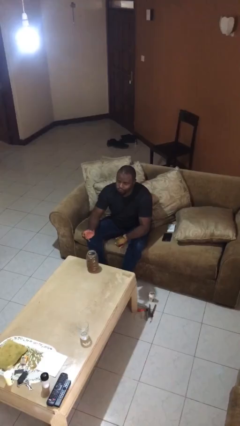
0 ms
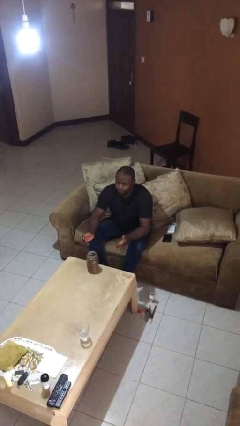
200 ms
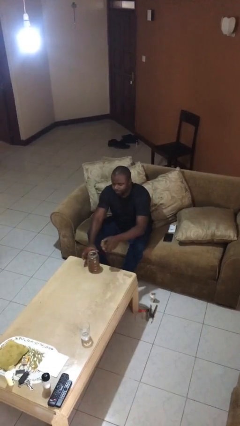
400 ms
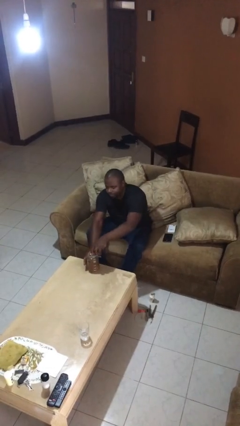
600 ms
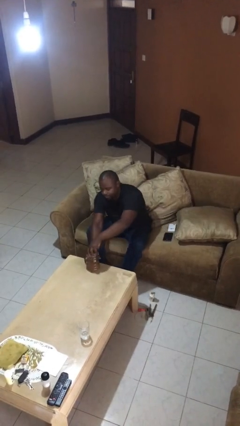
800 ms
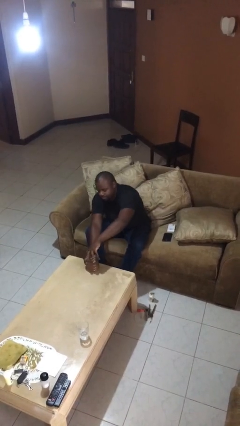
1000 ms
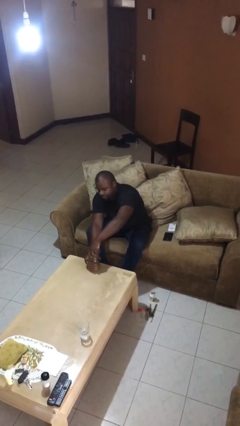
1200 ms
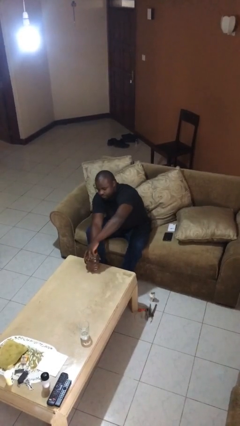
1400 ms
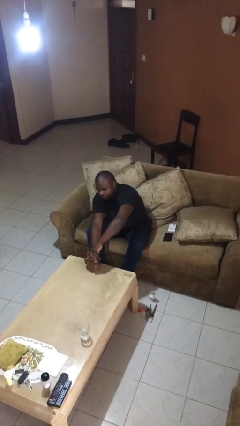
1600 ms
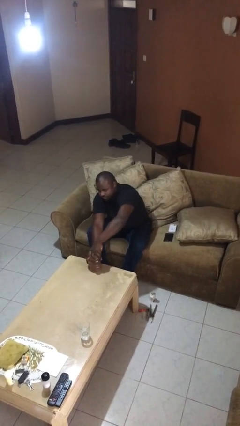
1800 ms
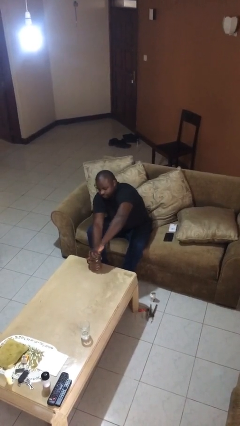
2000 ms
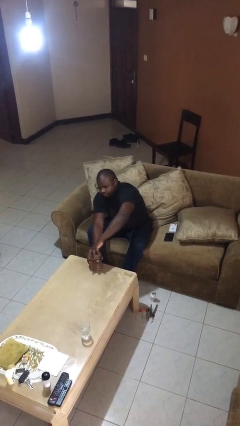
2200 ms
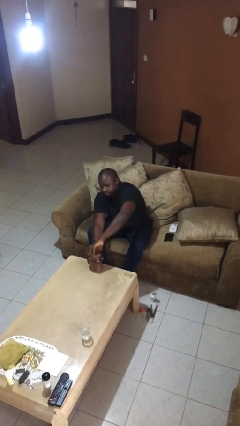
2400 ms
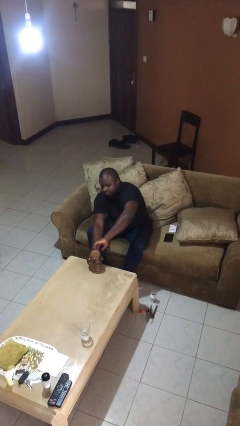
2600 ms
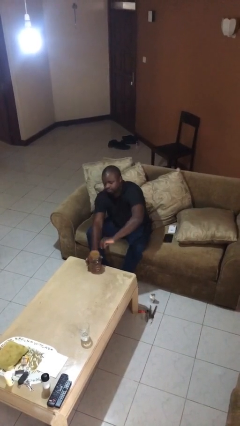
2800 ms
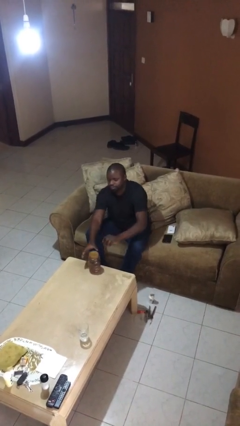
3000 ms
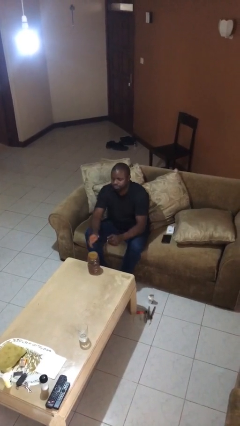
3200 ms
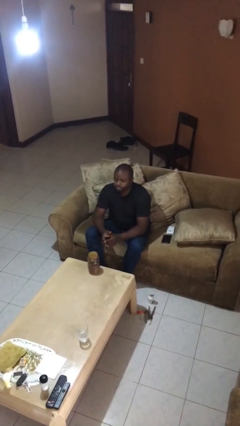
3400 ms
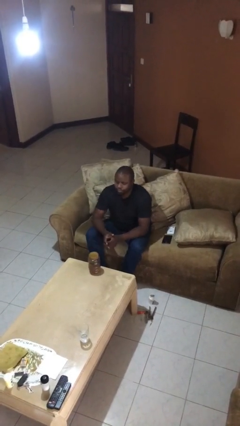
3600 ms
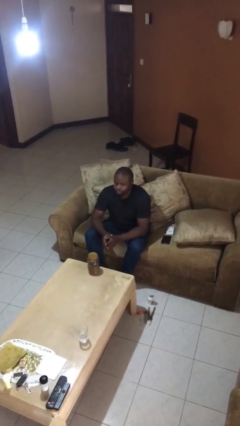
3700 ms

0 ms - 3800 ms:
person closes jar

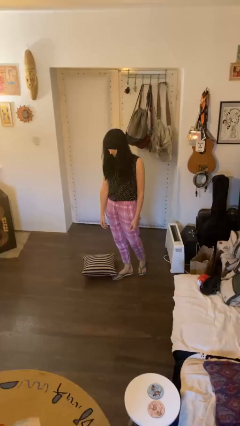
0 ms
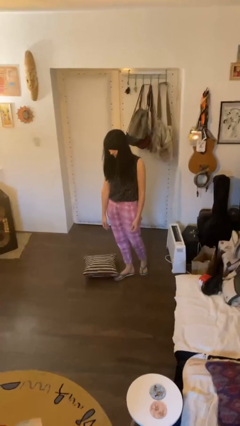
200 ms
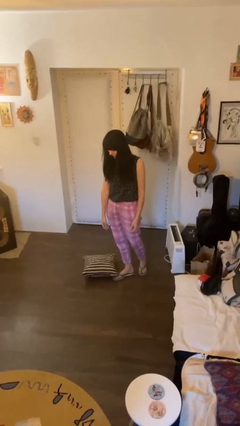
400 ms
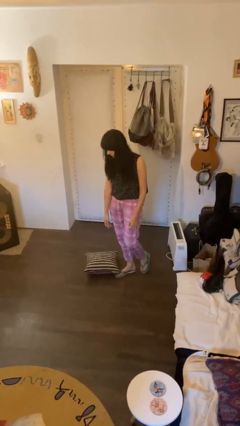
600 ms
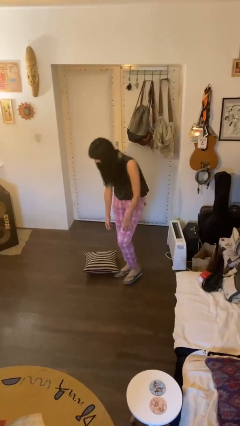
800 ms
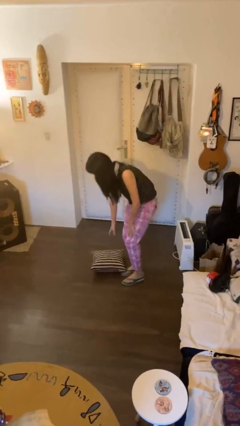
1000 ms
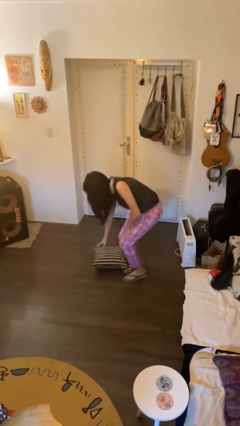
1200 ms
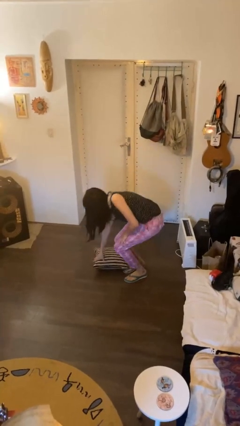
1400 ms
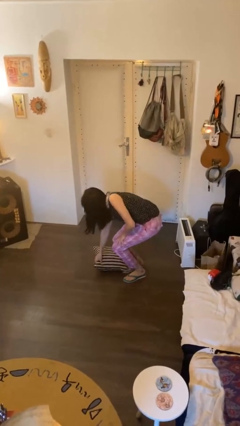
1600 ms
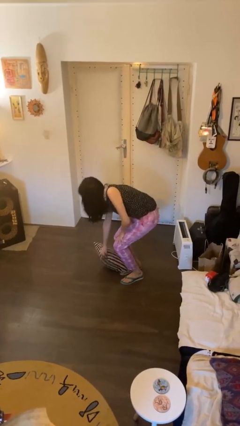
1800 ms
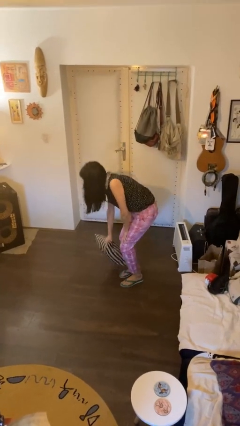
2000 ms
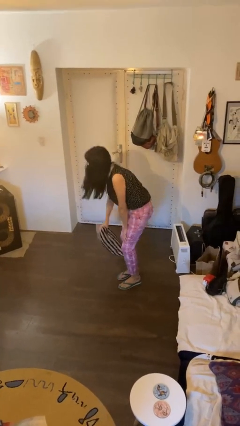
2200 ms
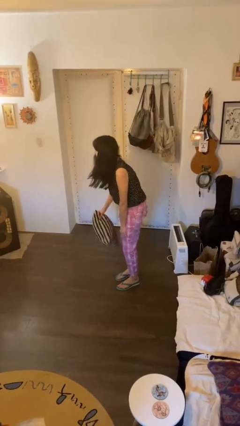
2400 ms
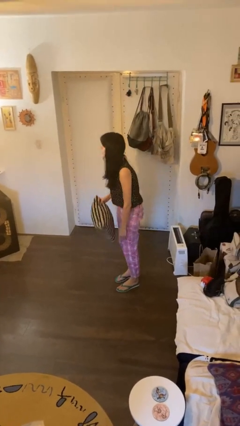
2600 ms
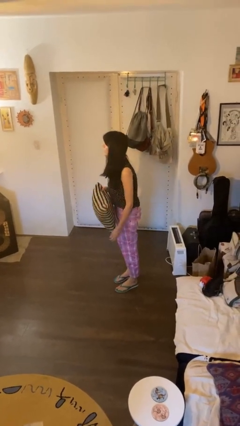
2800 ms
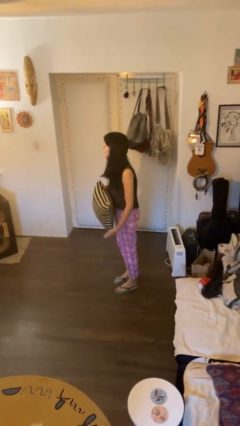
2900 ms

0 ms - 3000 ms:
person picks up object from floor

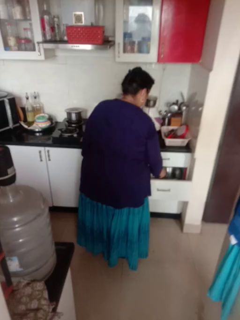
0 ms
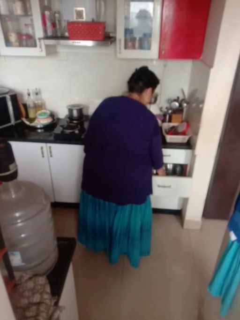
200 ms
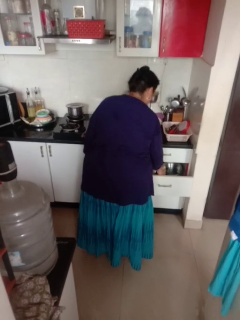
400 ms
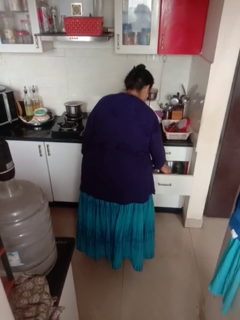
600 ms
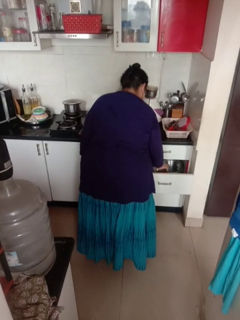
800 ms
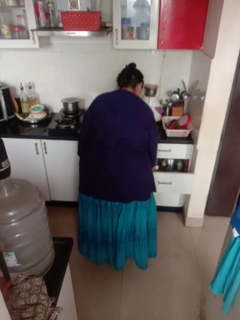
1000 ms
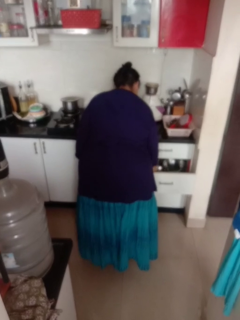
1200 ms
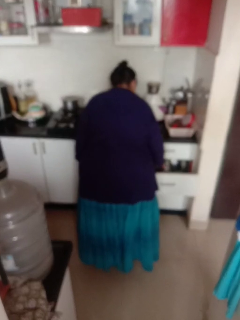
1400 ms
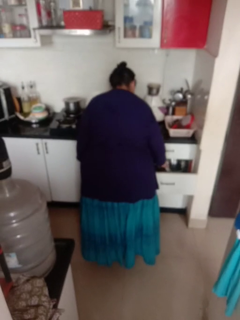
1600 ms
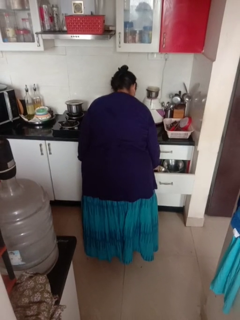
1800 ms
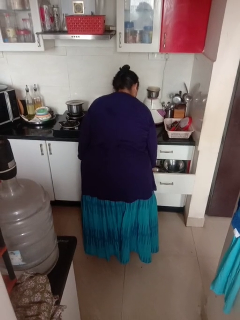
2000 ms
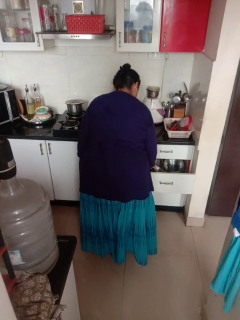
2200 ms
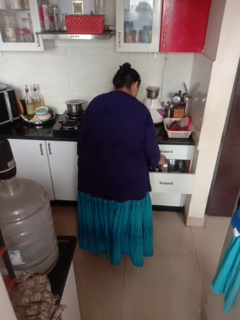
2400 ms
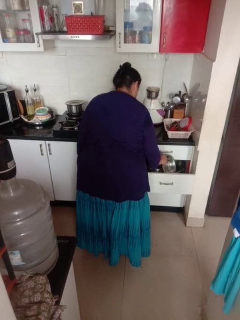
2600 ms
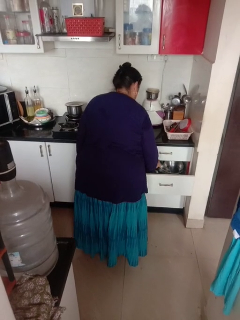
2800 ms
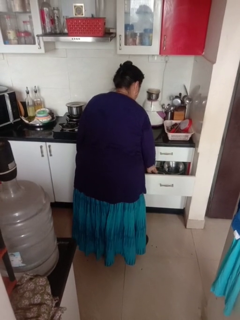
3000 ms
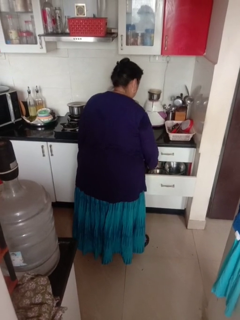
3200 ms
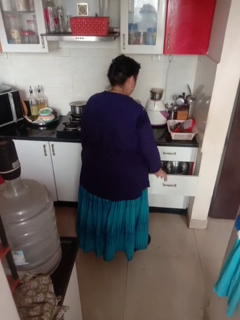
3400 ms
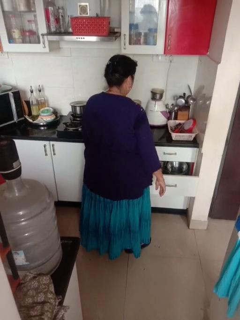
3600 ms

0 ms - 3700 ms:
person searches in kitchen drawer

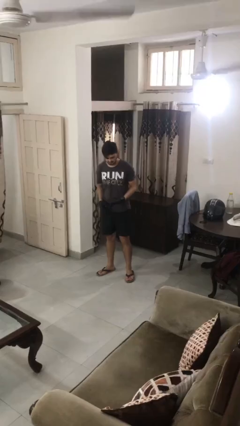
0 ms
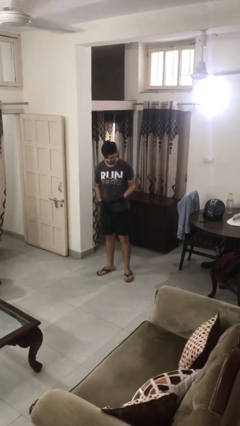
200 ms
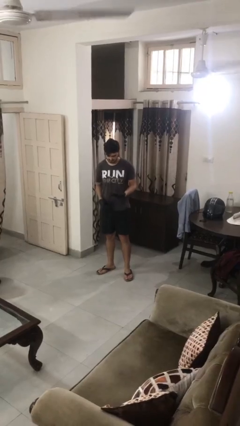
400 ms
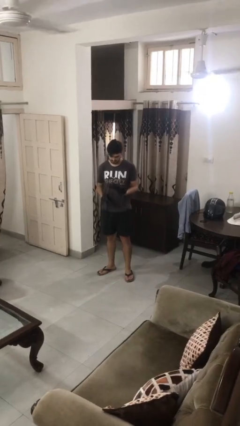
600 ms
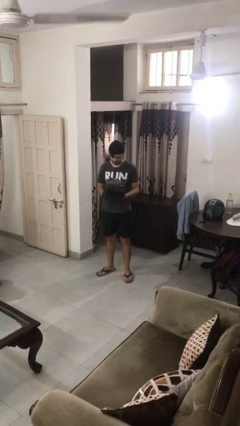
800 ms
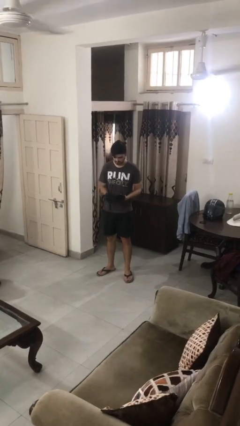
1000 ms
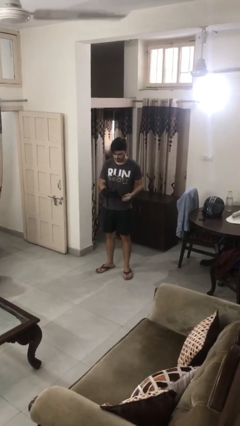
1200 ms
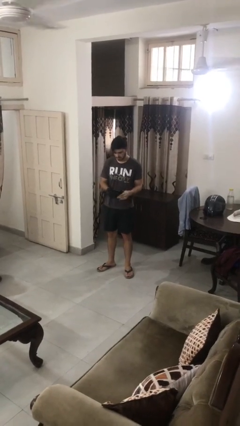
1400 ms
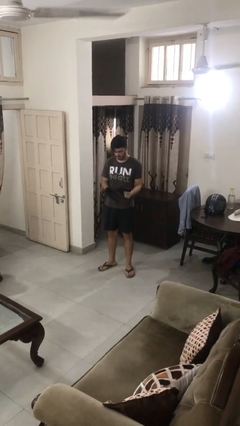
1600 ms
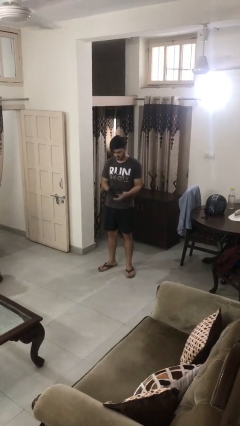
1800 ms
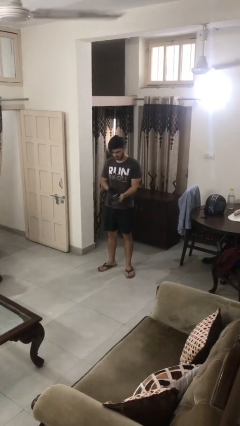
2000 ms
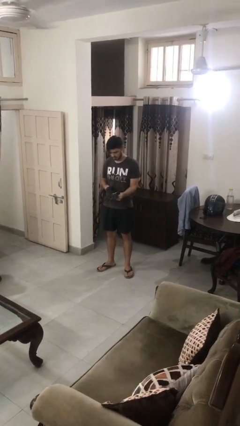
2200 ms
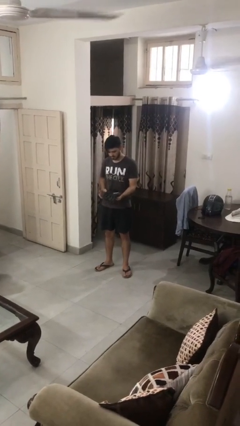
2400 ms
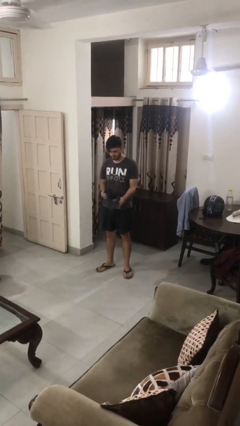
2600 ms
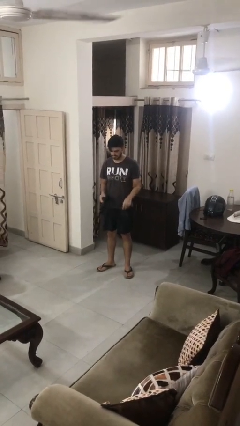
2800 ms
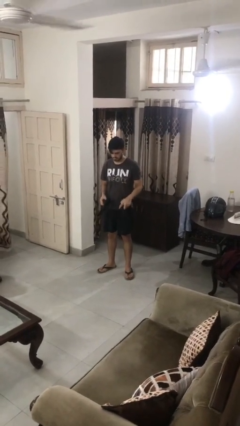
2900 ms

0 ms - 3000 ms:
person takes off gloves

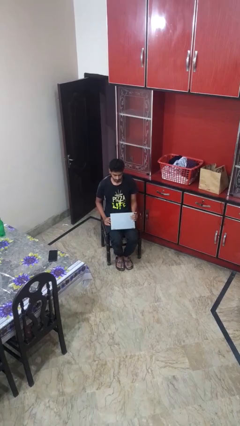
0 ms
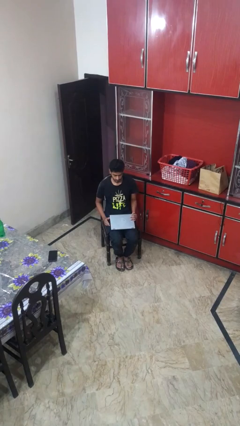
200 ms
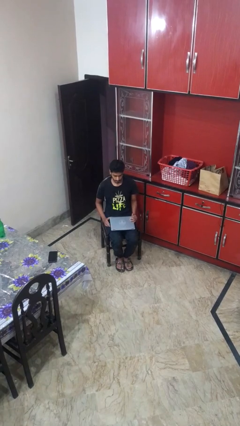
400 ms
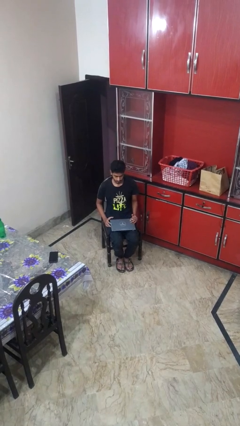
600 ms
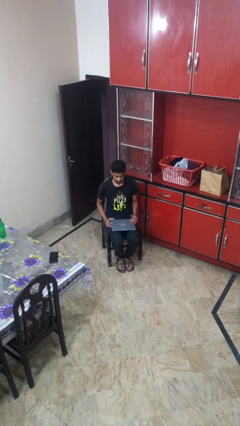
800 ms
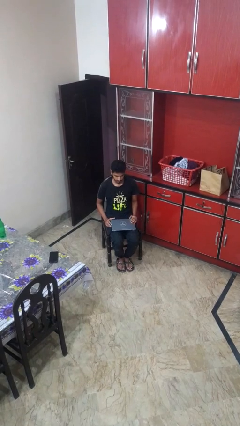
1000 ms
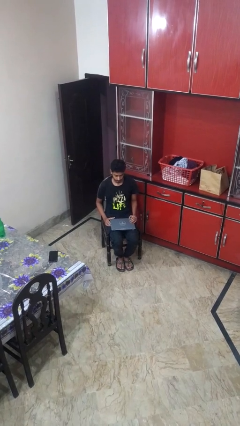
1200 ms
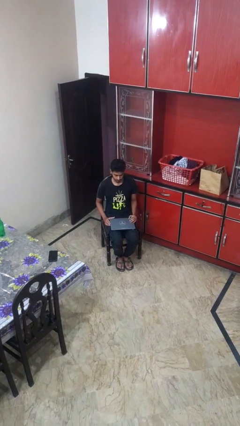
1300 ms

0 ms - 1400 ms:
person closes laptop

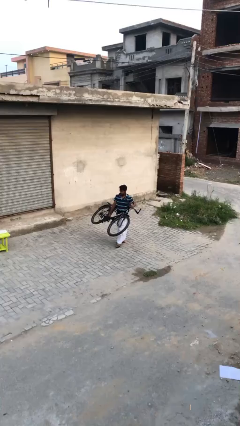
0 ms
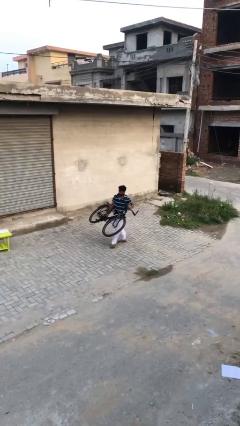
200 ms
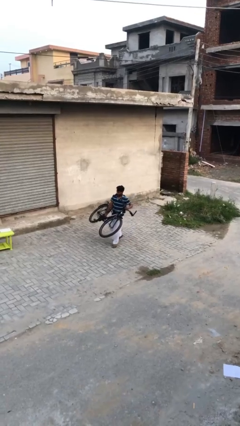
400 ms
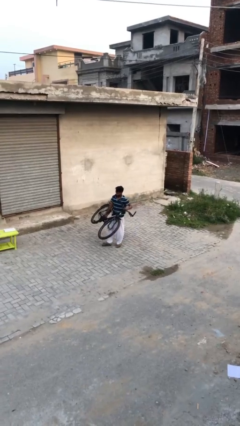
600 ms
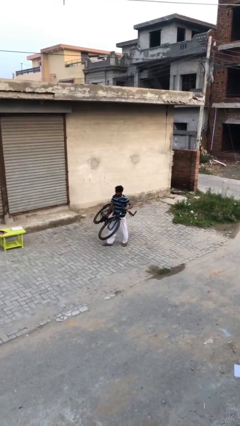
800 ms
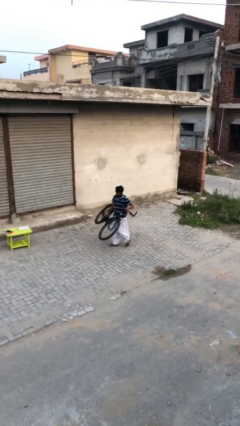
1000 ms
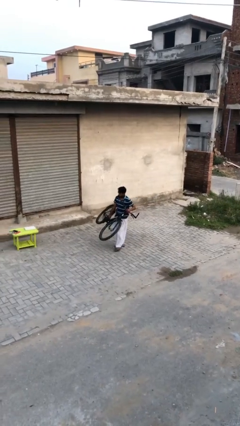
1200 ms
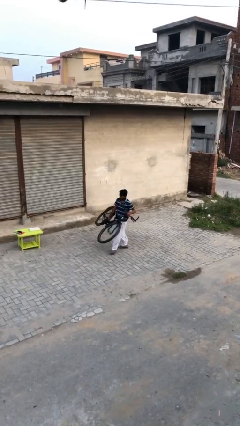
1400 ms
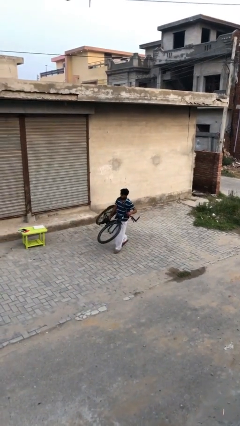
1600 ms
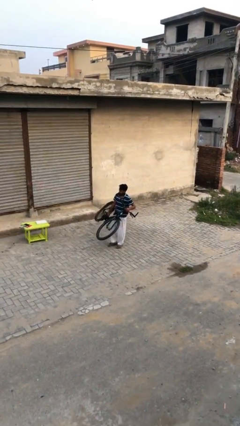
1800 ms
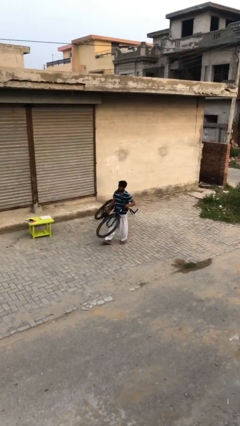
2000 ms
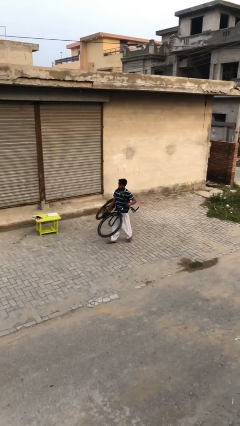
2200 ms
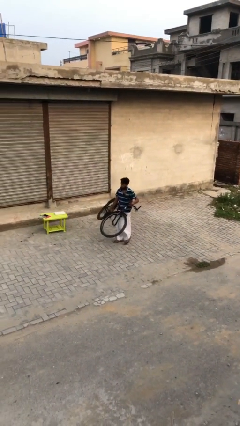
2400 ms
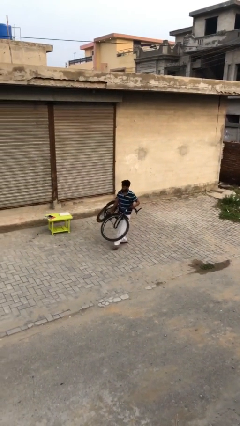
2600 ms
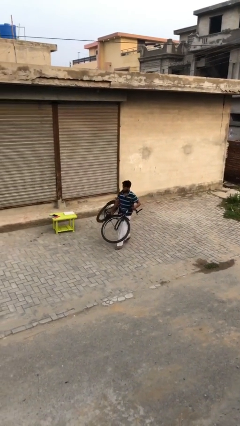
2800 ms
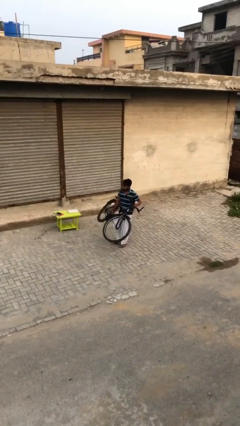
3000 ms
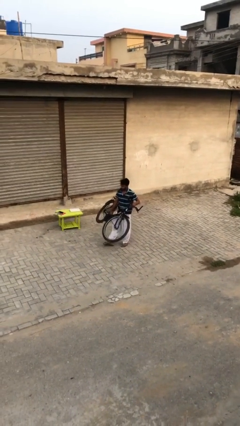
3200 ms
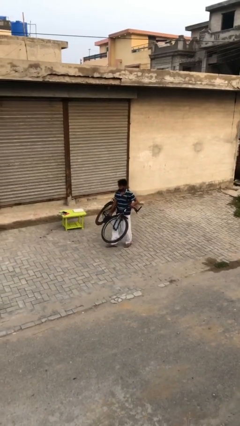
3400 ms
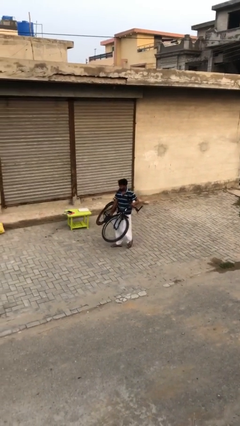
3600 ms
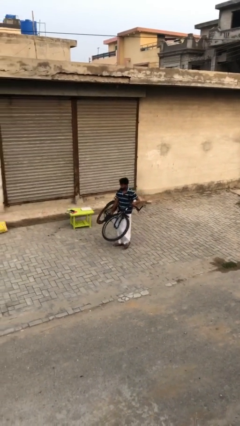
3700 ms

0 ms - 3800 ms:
person carries heavy object
